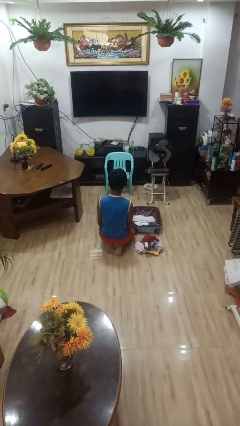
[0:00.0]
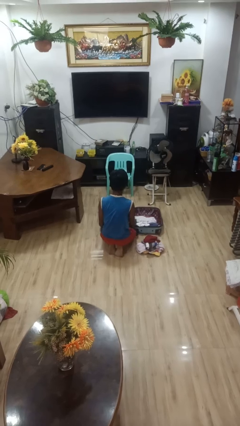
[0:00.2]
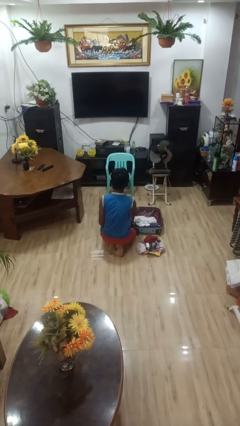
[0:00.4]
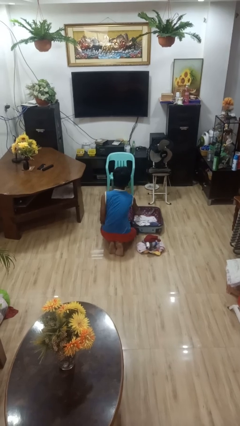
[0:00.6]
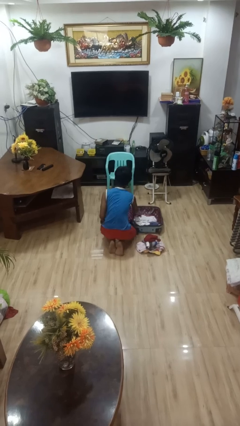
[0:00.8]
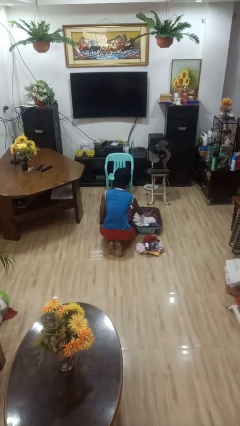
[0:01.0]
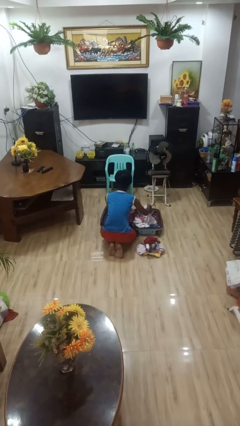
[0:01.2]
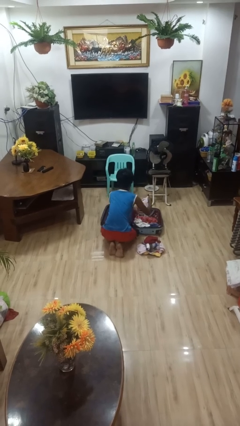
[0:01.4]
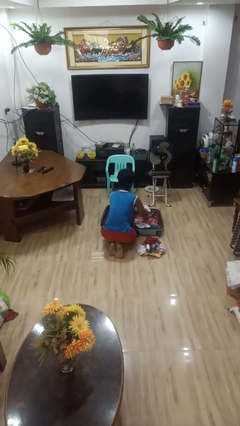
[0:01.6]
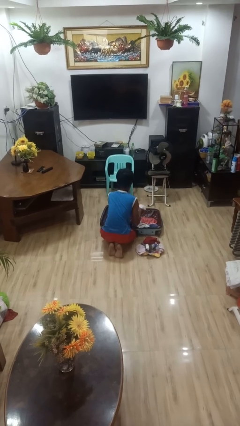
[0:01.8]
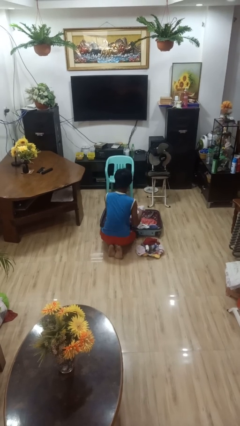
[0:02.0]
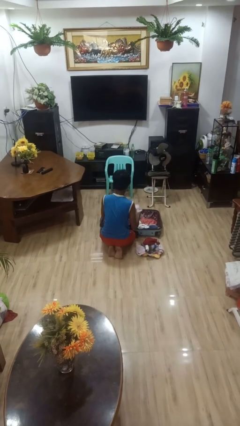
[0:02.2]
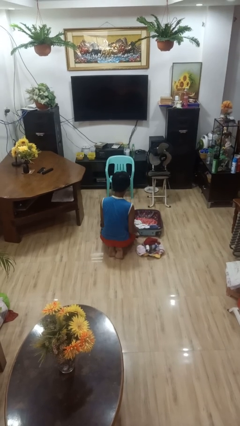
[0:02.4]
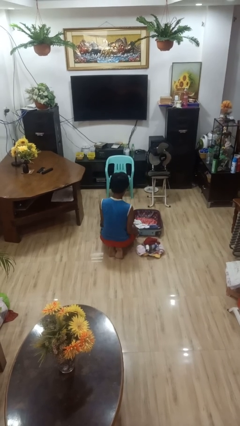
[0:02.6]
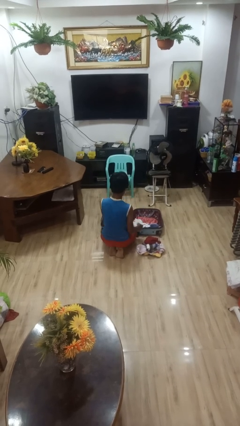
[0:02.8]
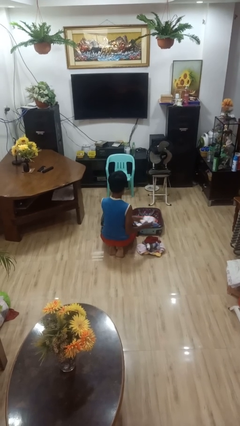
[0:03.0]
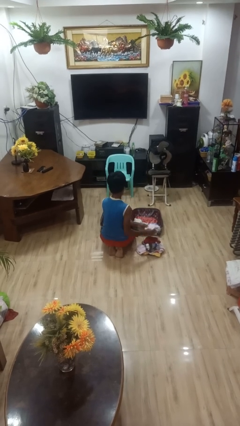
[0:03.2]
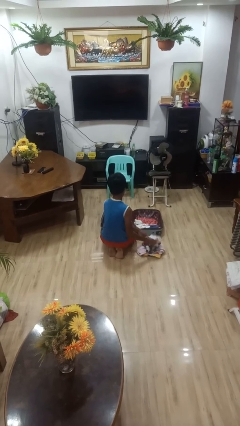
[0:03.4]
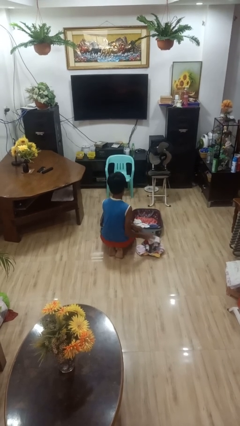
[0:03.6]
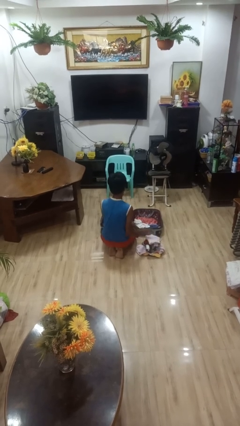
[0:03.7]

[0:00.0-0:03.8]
person unloads clothes from suitcase

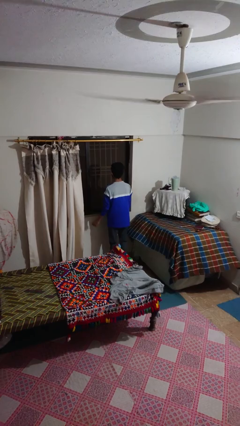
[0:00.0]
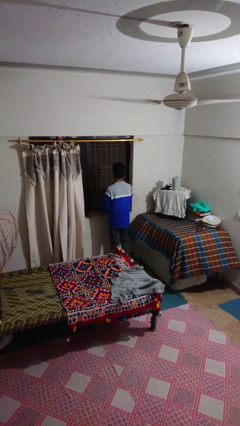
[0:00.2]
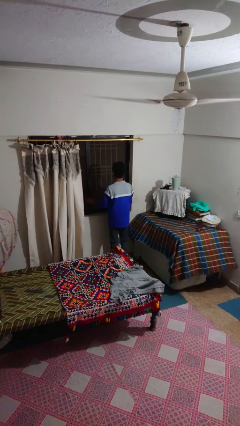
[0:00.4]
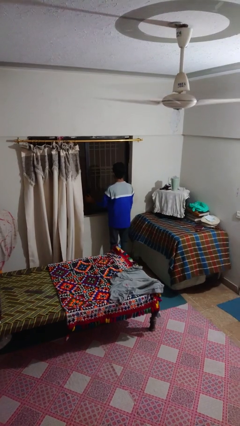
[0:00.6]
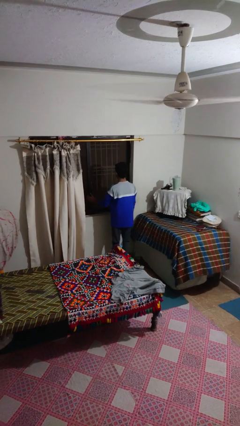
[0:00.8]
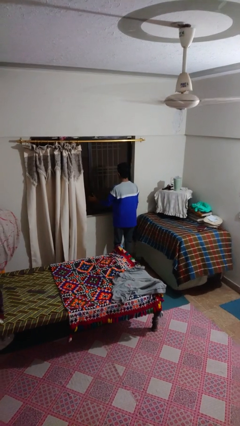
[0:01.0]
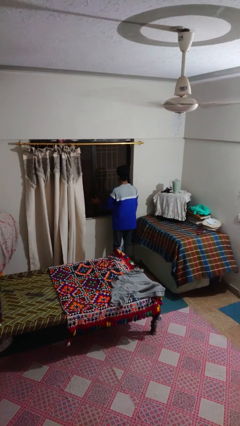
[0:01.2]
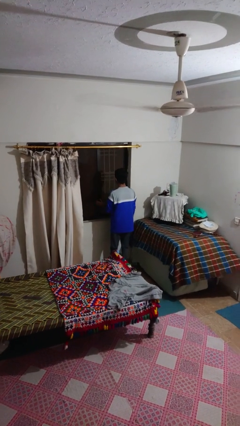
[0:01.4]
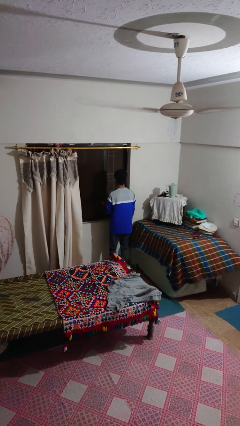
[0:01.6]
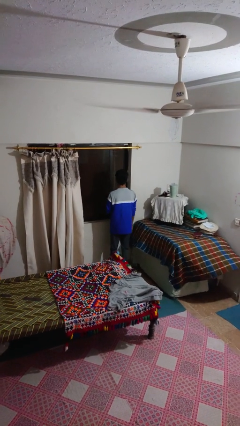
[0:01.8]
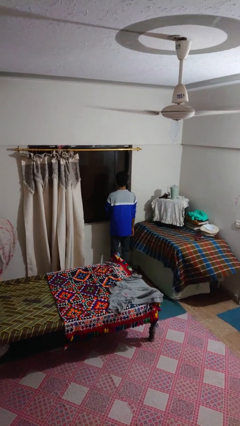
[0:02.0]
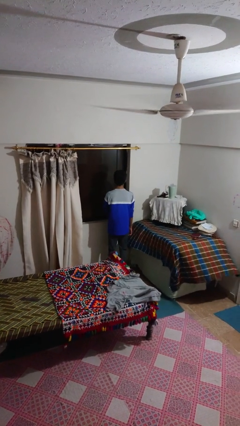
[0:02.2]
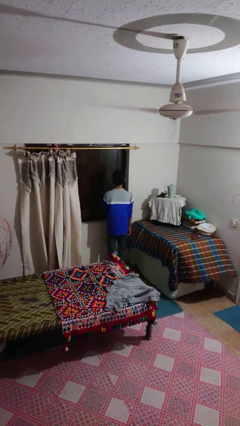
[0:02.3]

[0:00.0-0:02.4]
person closes home window

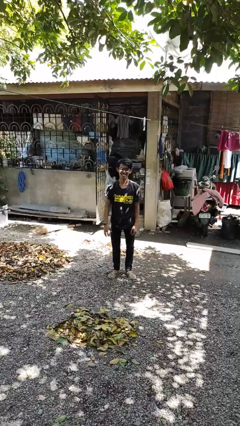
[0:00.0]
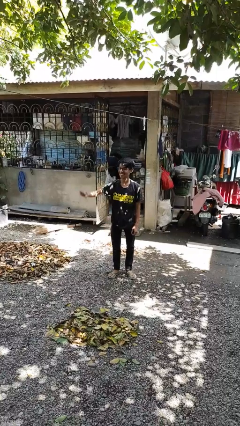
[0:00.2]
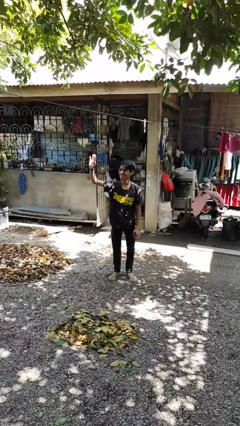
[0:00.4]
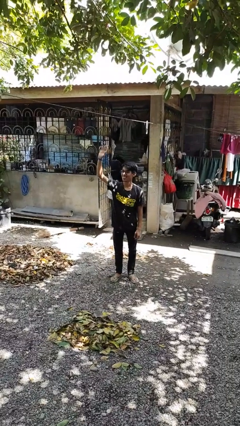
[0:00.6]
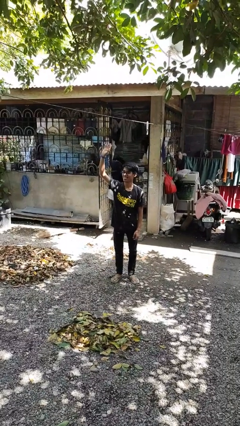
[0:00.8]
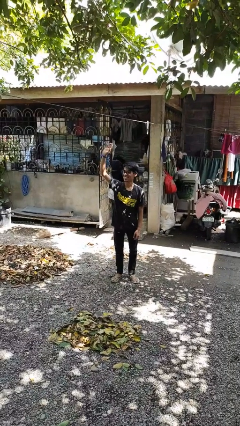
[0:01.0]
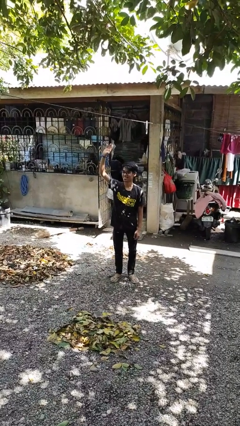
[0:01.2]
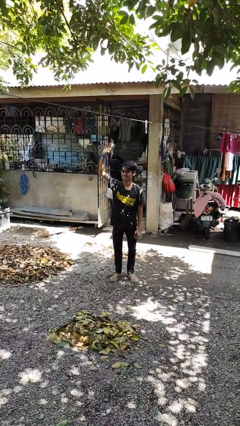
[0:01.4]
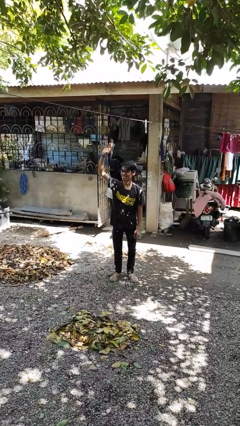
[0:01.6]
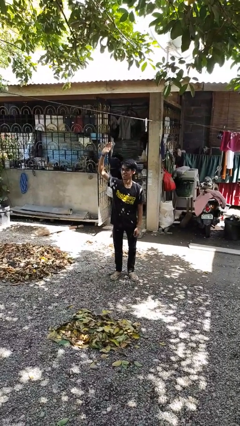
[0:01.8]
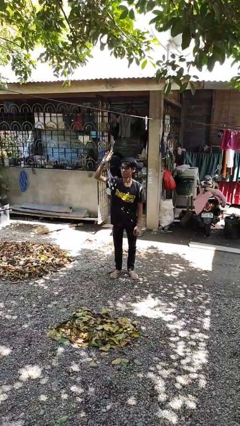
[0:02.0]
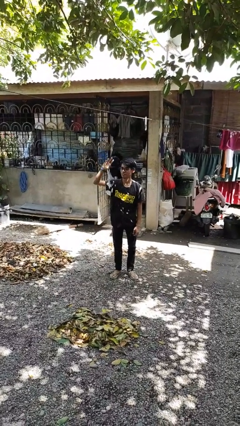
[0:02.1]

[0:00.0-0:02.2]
person gestures raise hand

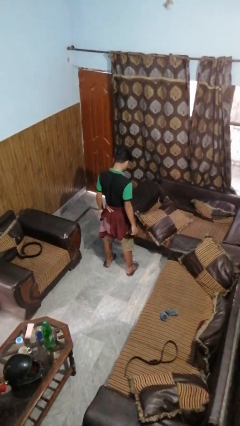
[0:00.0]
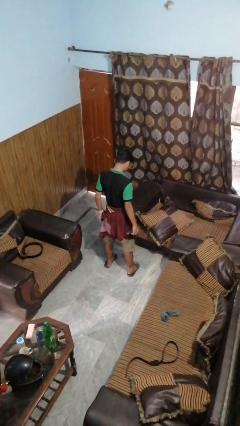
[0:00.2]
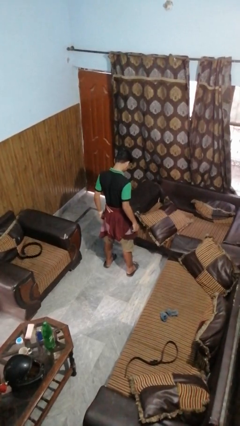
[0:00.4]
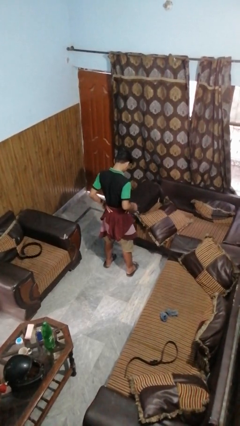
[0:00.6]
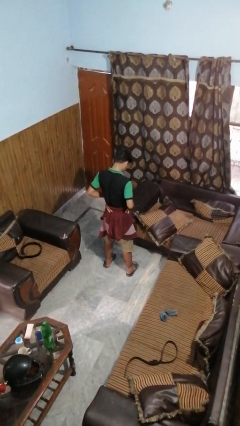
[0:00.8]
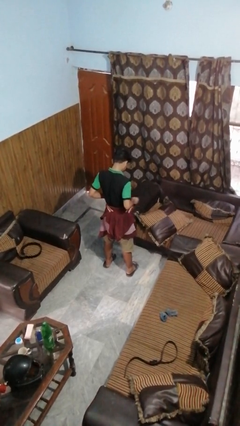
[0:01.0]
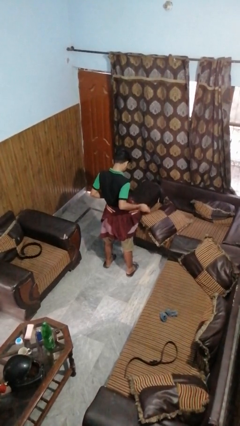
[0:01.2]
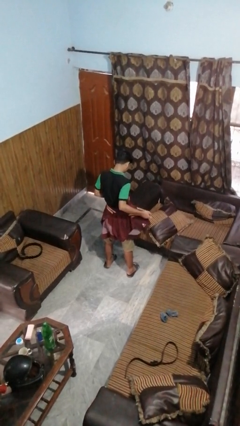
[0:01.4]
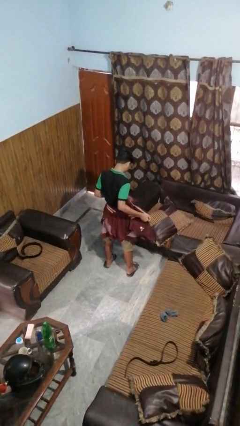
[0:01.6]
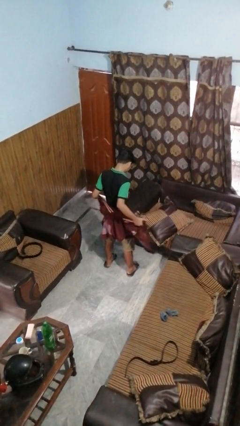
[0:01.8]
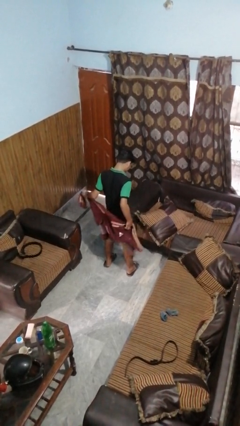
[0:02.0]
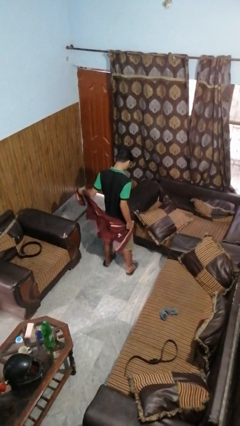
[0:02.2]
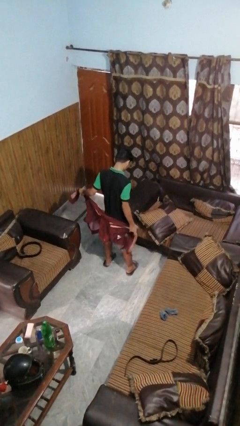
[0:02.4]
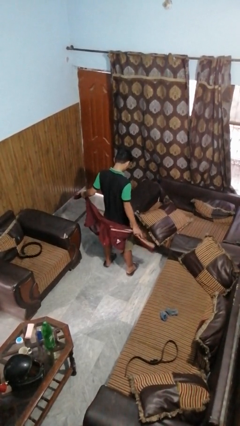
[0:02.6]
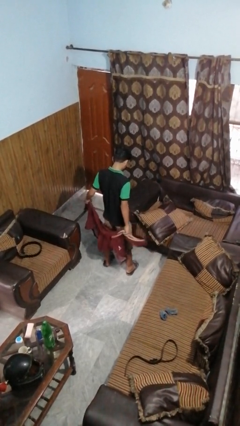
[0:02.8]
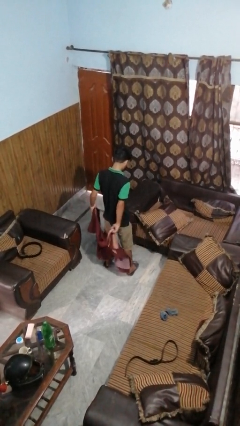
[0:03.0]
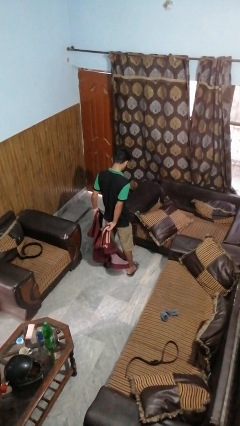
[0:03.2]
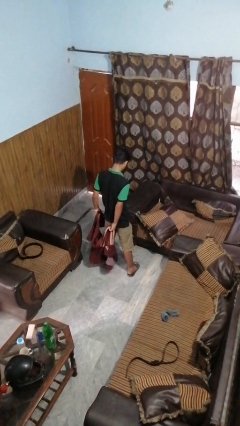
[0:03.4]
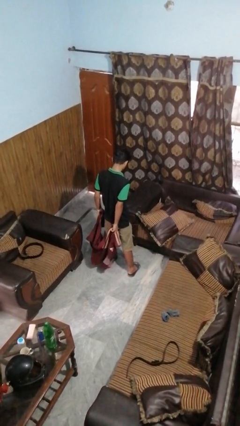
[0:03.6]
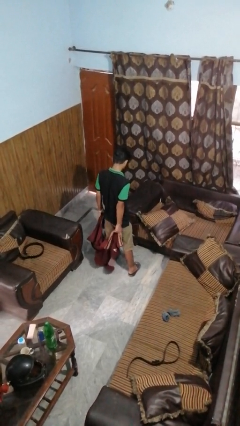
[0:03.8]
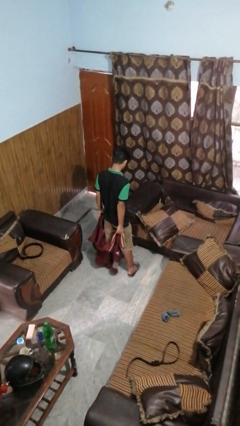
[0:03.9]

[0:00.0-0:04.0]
person unties jacket around waist

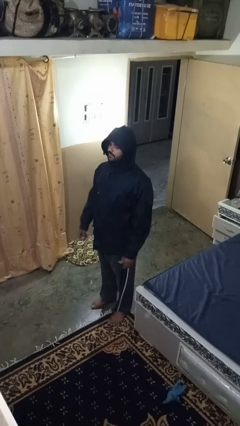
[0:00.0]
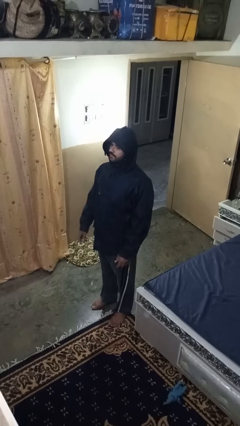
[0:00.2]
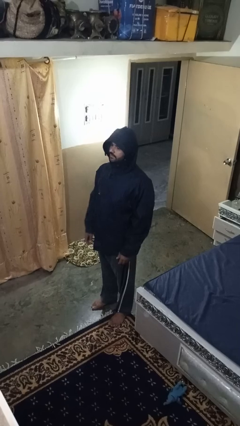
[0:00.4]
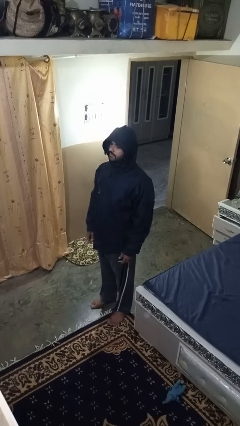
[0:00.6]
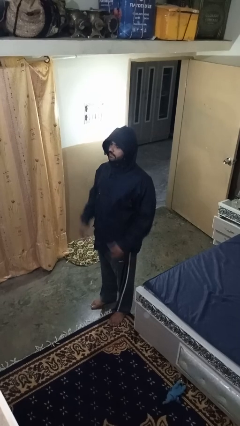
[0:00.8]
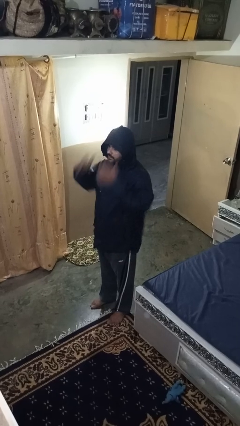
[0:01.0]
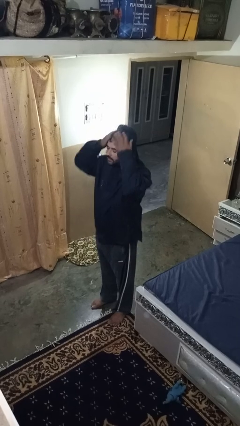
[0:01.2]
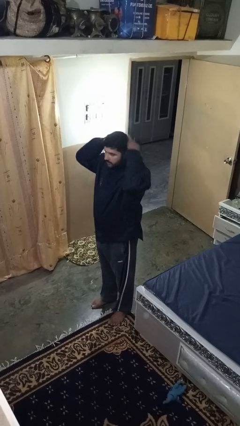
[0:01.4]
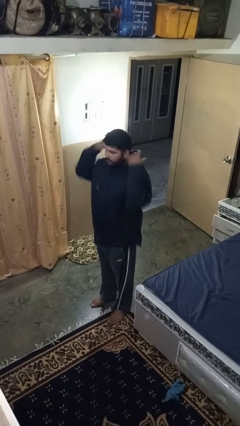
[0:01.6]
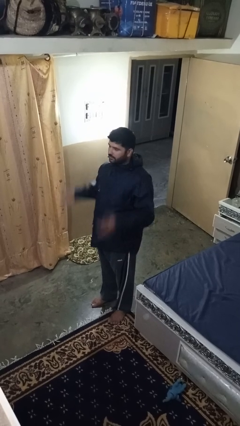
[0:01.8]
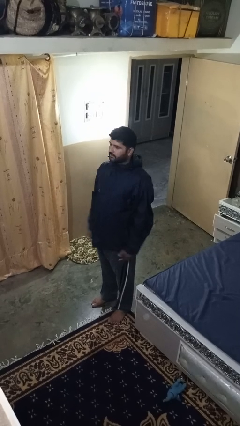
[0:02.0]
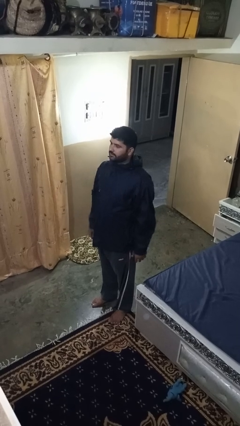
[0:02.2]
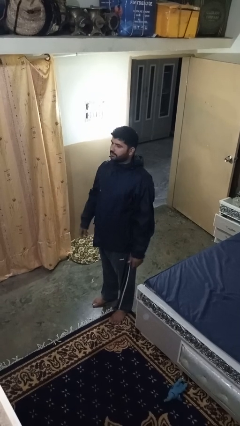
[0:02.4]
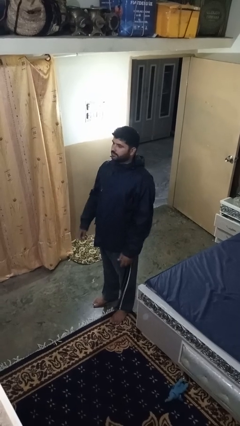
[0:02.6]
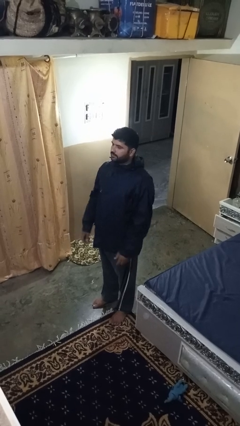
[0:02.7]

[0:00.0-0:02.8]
person takes off hoodie

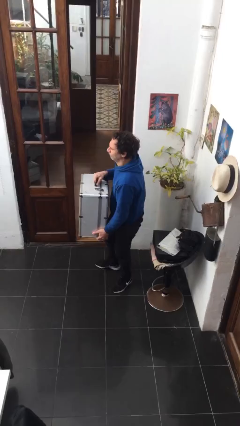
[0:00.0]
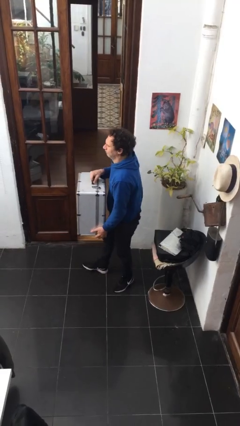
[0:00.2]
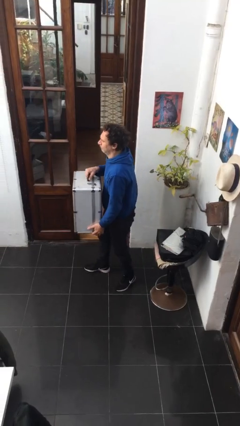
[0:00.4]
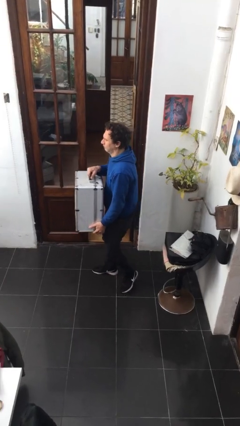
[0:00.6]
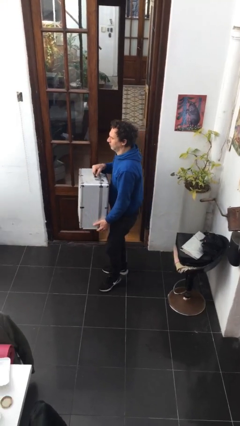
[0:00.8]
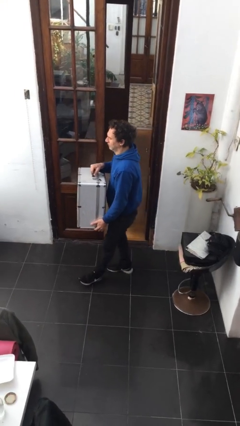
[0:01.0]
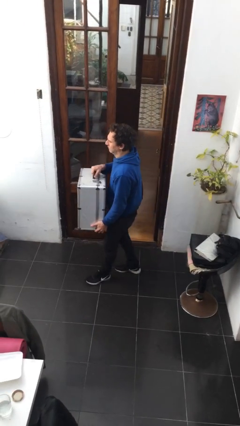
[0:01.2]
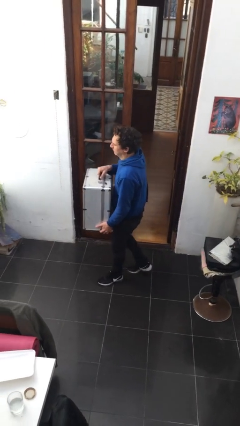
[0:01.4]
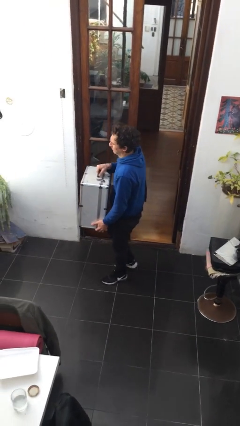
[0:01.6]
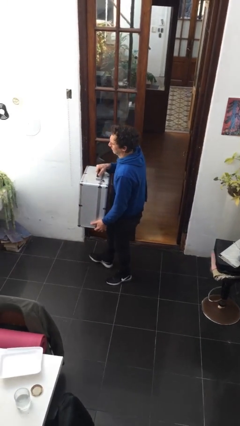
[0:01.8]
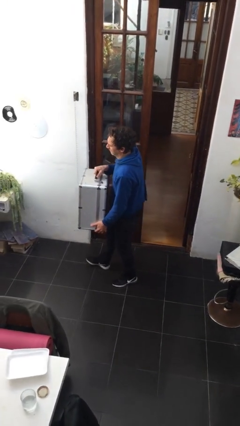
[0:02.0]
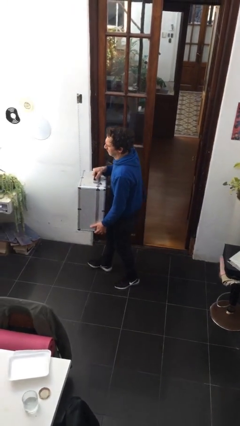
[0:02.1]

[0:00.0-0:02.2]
person carries heavy object
